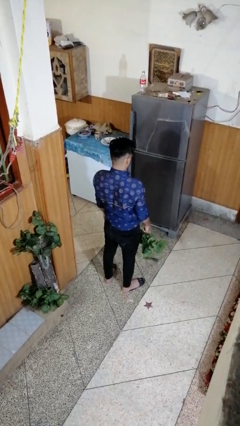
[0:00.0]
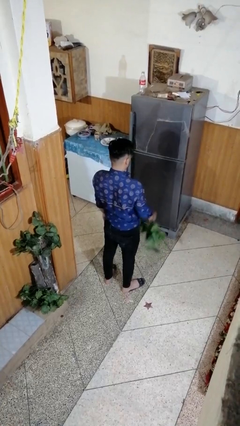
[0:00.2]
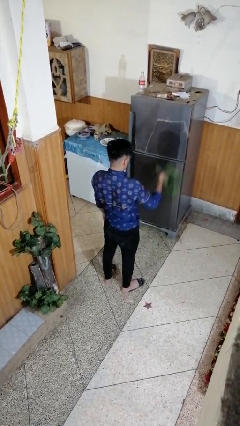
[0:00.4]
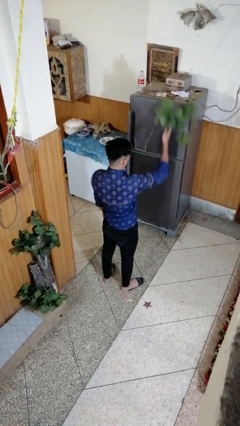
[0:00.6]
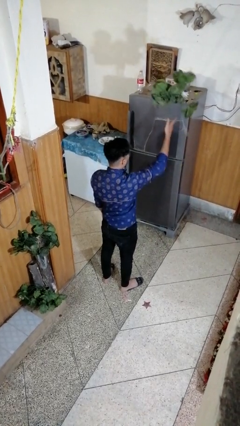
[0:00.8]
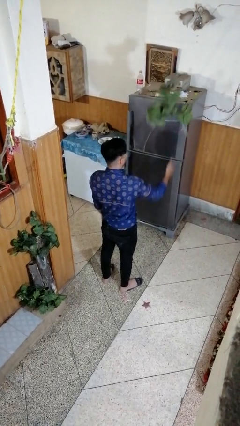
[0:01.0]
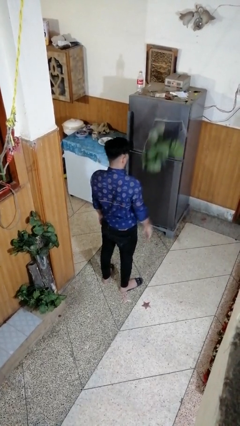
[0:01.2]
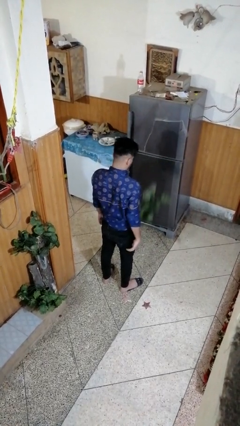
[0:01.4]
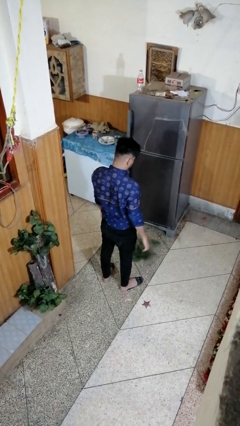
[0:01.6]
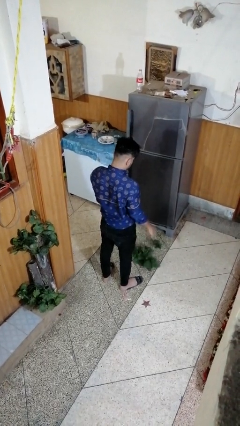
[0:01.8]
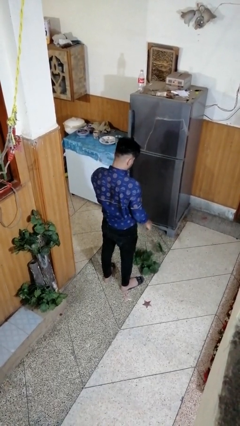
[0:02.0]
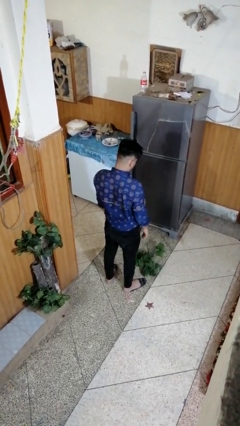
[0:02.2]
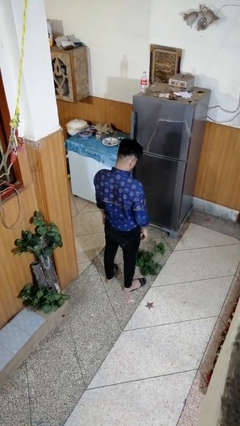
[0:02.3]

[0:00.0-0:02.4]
person throws object into air

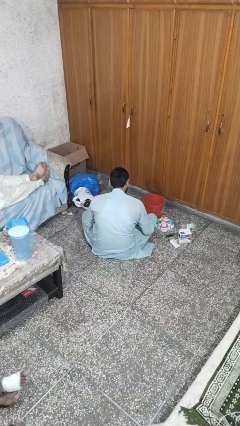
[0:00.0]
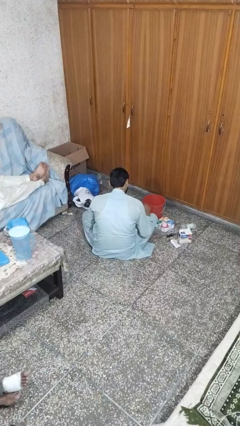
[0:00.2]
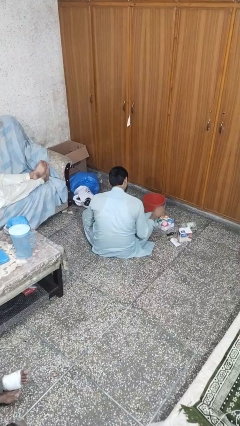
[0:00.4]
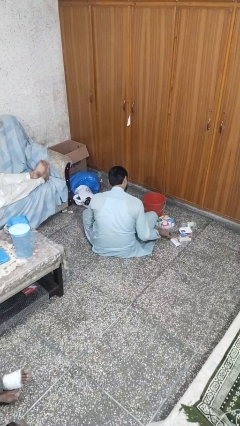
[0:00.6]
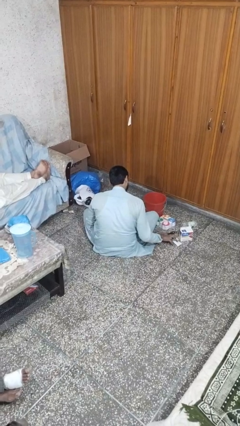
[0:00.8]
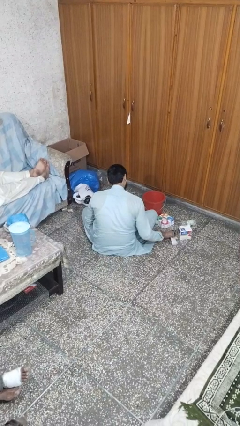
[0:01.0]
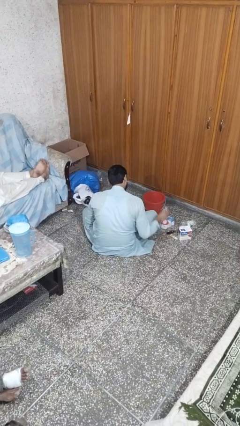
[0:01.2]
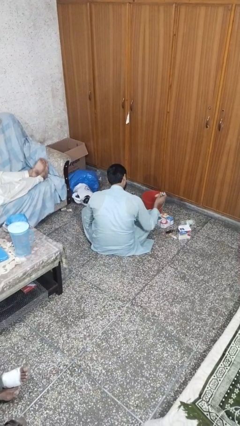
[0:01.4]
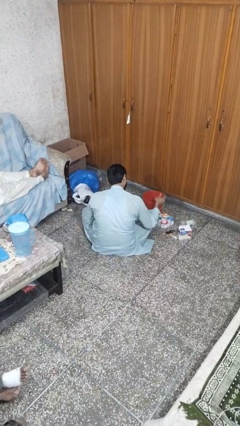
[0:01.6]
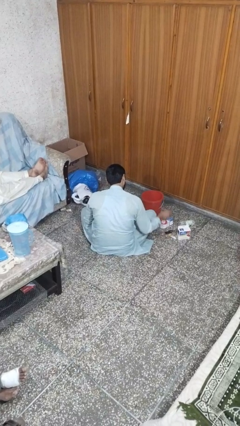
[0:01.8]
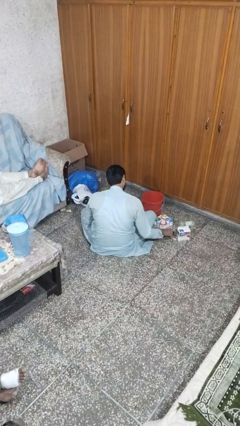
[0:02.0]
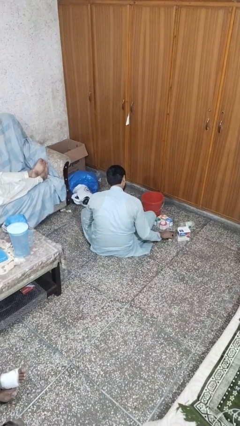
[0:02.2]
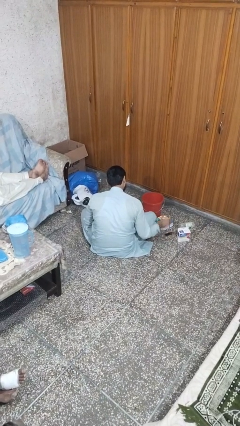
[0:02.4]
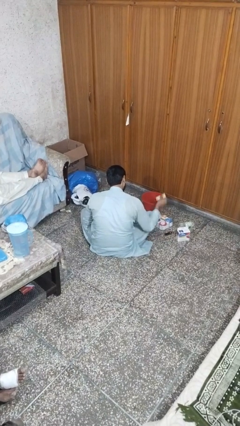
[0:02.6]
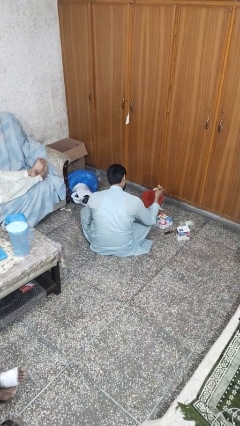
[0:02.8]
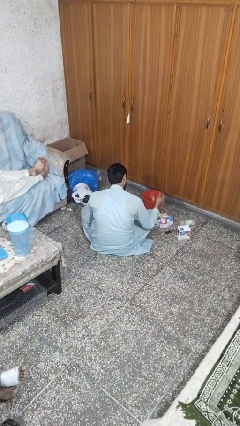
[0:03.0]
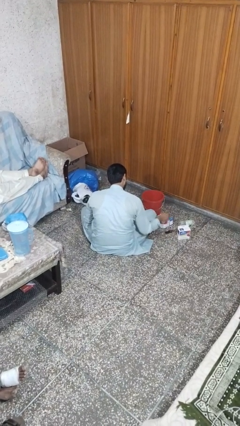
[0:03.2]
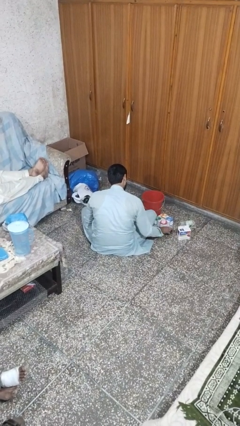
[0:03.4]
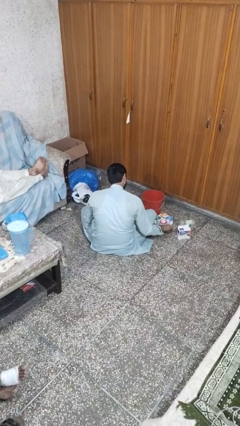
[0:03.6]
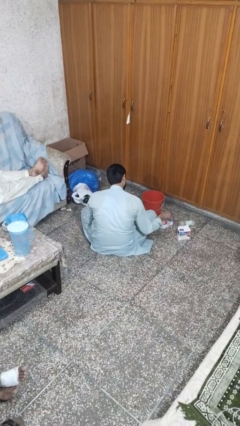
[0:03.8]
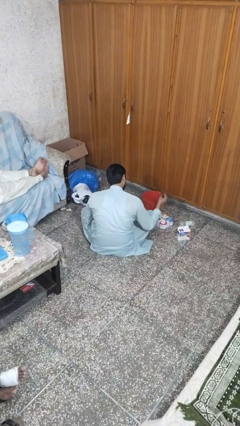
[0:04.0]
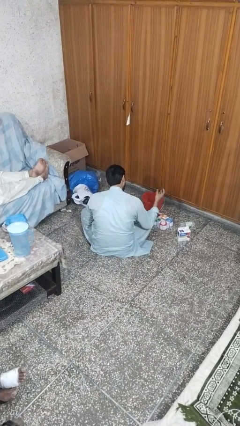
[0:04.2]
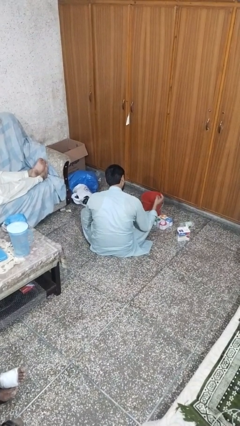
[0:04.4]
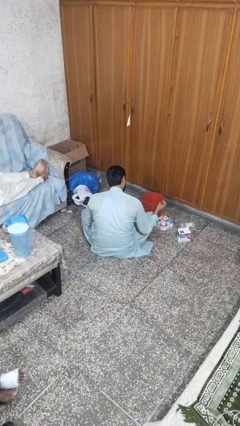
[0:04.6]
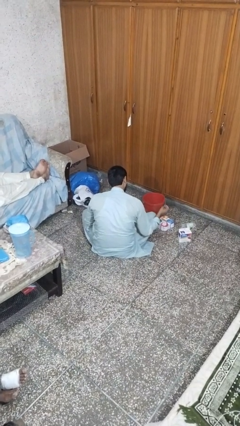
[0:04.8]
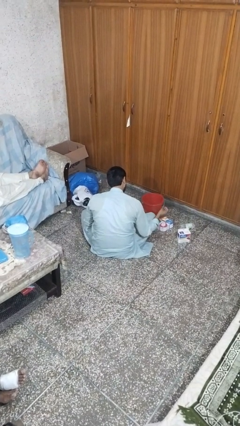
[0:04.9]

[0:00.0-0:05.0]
person puts object into basket

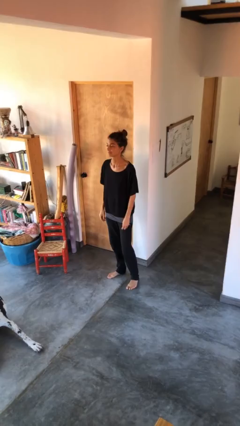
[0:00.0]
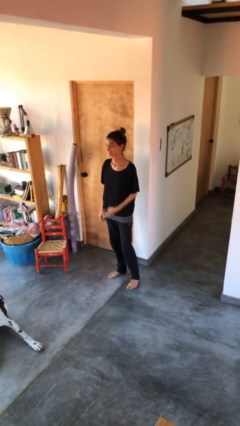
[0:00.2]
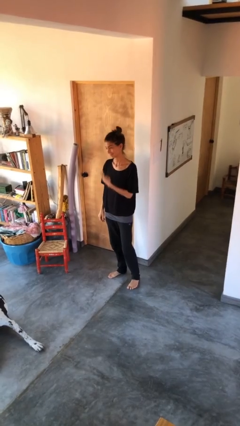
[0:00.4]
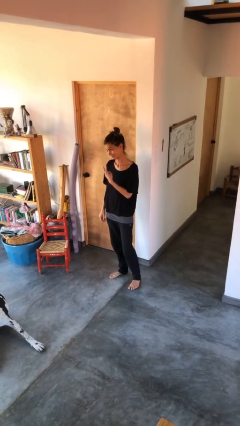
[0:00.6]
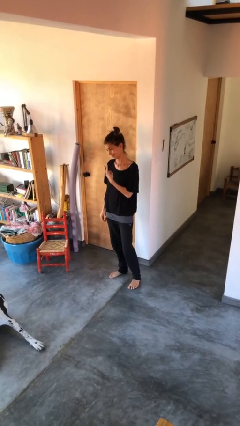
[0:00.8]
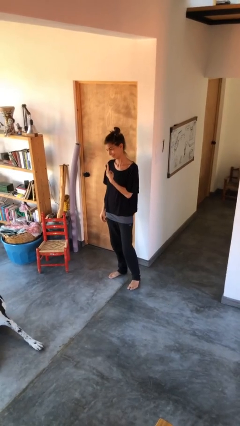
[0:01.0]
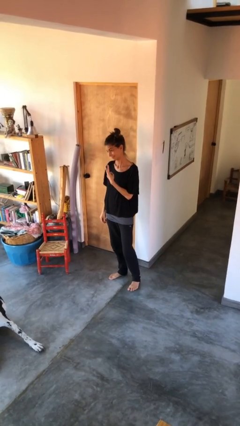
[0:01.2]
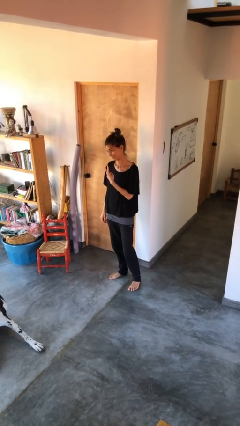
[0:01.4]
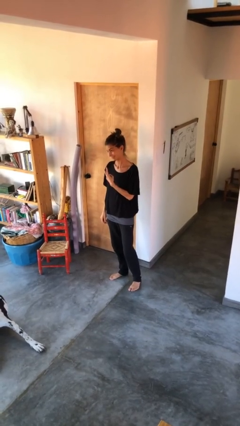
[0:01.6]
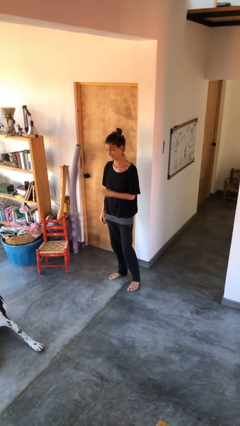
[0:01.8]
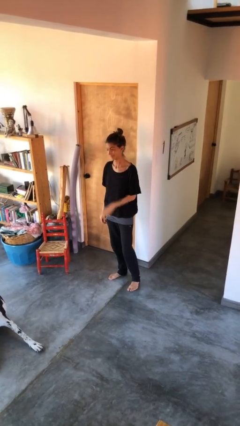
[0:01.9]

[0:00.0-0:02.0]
person gestures peace

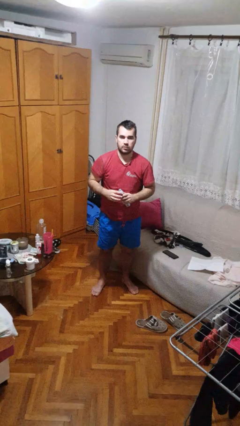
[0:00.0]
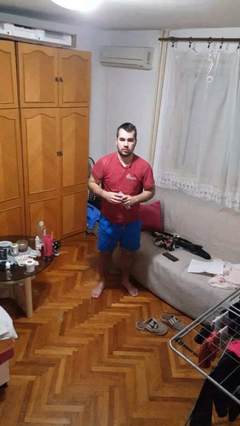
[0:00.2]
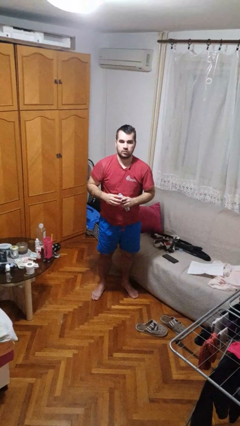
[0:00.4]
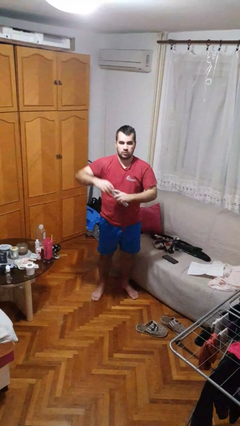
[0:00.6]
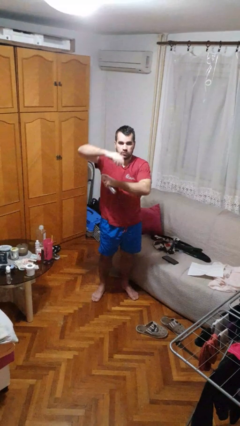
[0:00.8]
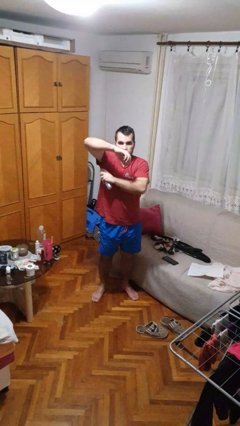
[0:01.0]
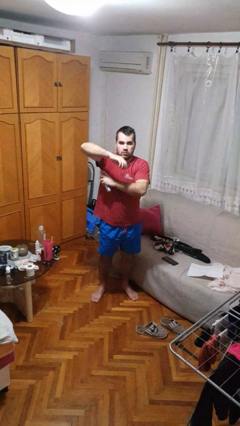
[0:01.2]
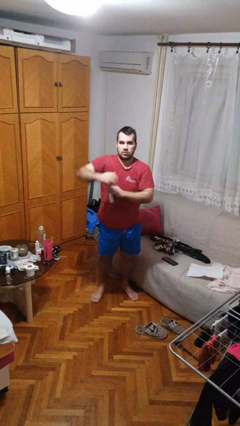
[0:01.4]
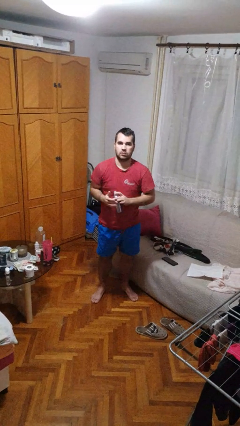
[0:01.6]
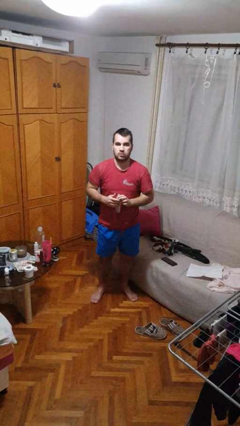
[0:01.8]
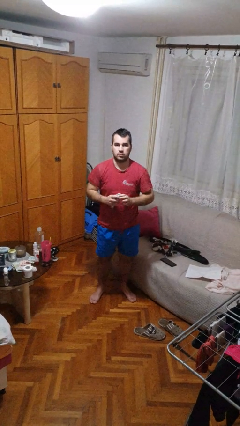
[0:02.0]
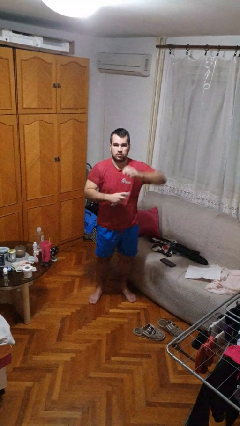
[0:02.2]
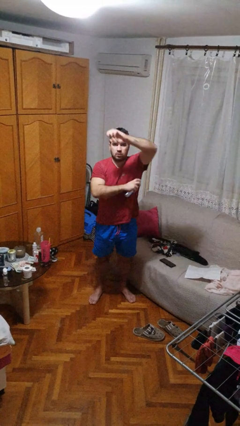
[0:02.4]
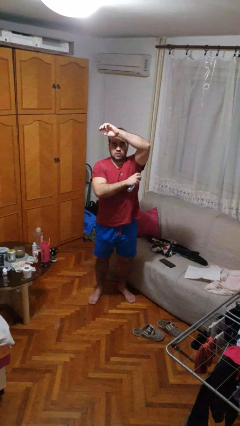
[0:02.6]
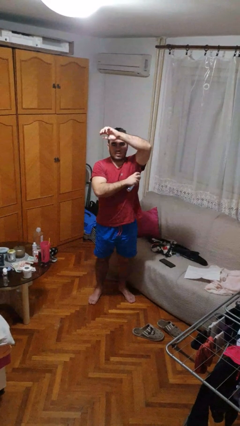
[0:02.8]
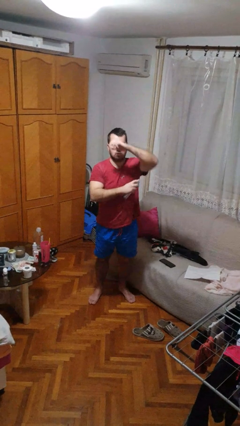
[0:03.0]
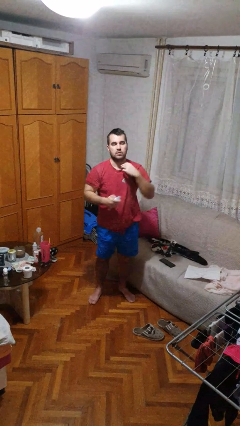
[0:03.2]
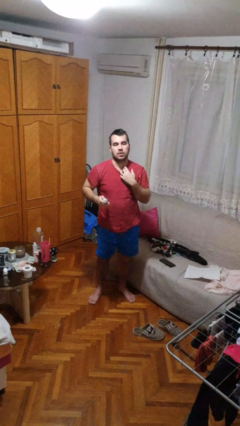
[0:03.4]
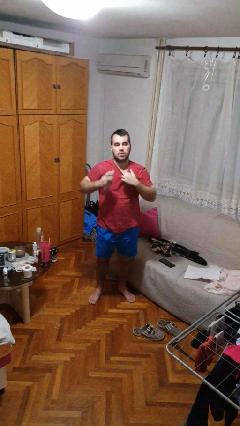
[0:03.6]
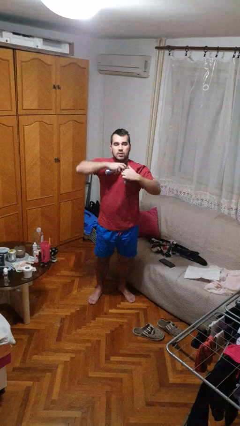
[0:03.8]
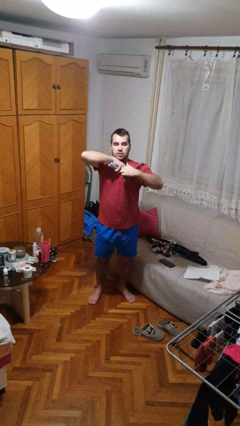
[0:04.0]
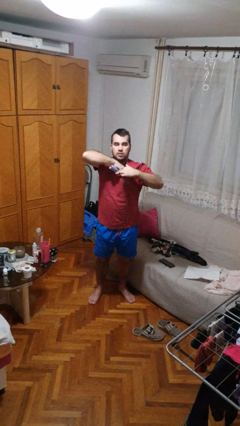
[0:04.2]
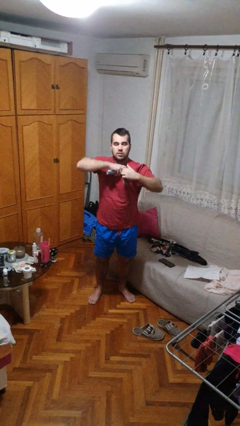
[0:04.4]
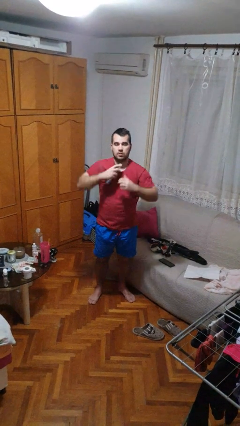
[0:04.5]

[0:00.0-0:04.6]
person applies deodorant

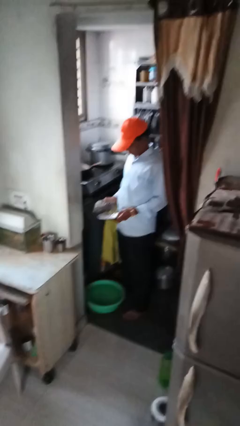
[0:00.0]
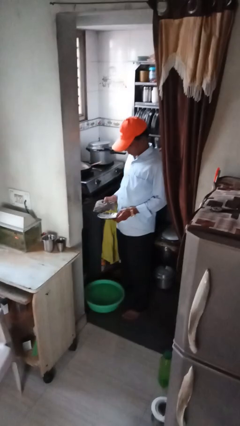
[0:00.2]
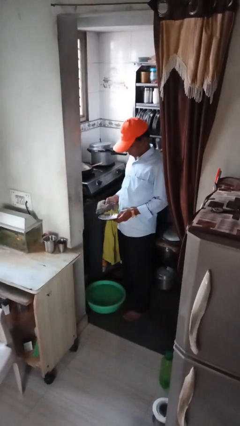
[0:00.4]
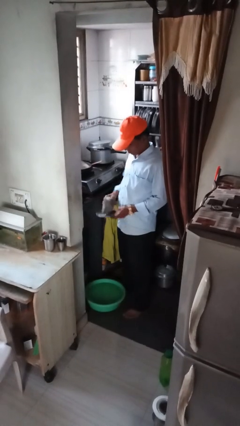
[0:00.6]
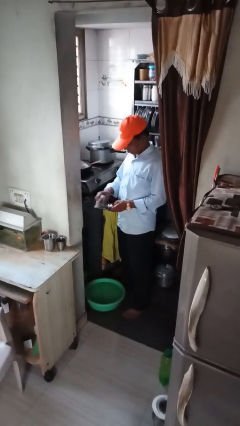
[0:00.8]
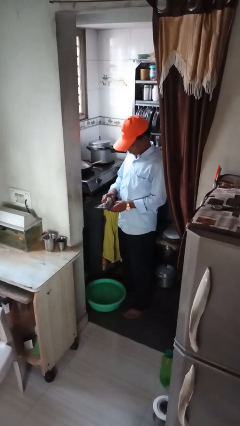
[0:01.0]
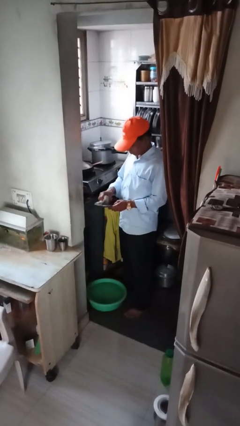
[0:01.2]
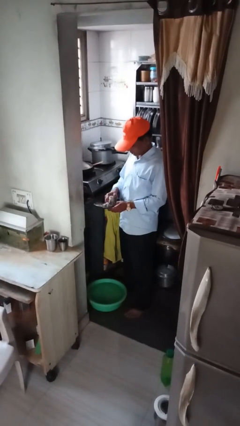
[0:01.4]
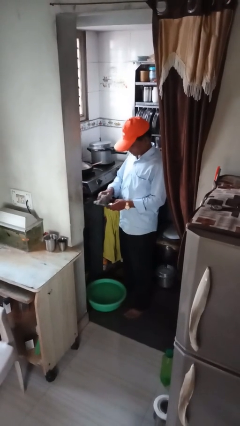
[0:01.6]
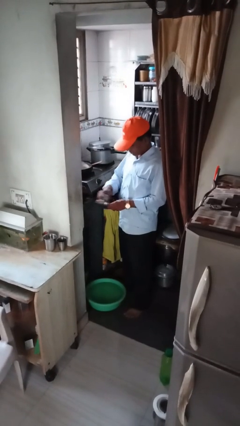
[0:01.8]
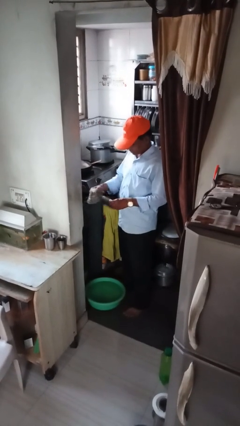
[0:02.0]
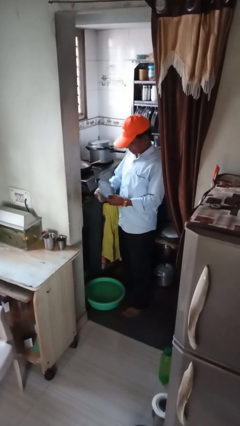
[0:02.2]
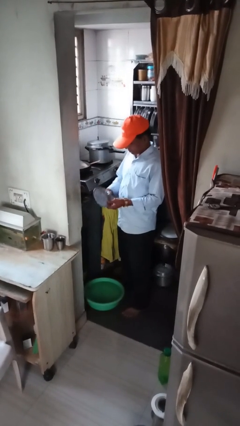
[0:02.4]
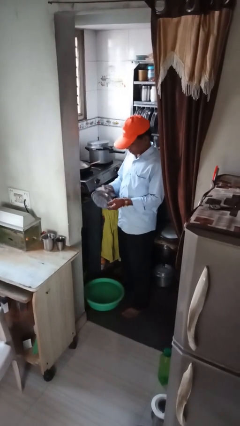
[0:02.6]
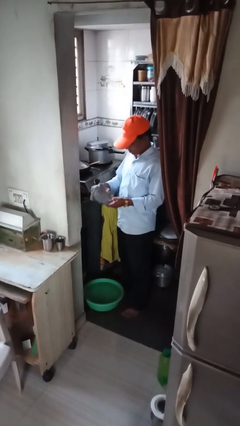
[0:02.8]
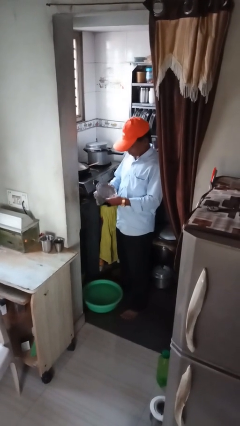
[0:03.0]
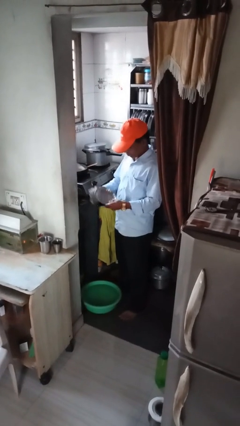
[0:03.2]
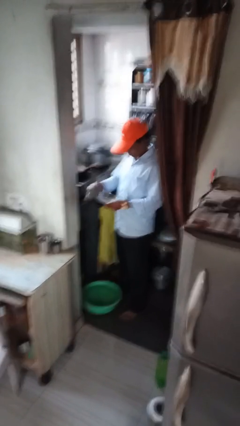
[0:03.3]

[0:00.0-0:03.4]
person dries dish
